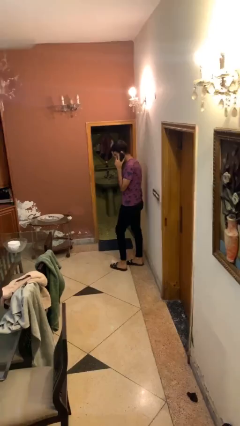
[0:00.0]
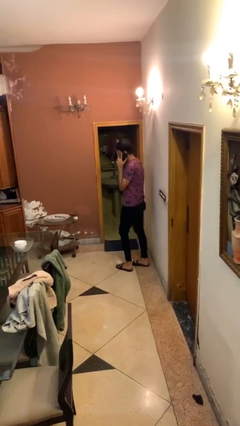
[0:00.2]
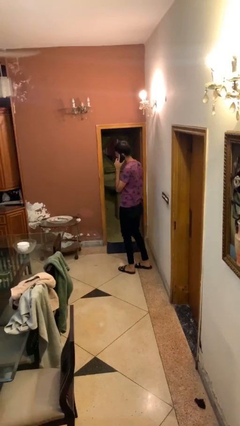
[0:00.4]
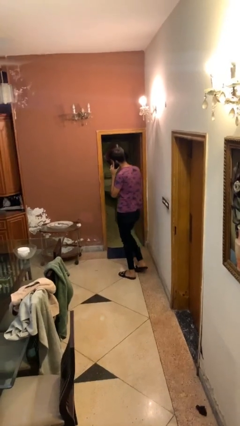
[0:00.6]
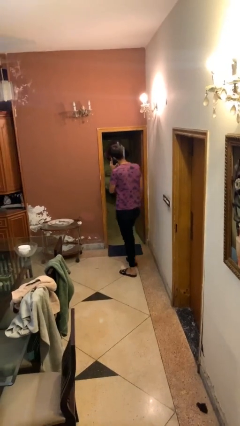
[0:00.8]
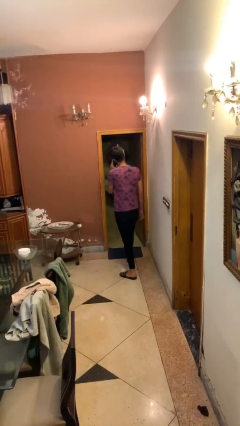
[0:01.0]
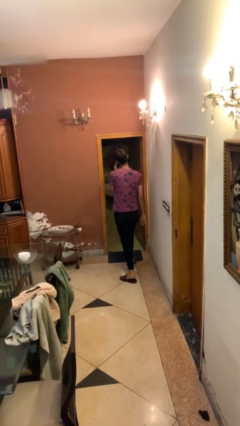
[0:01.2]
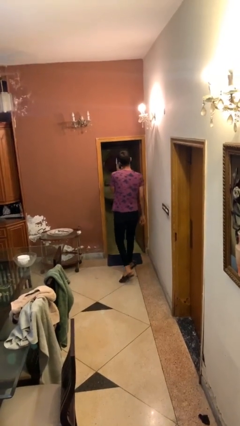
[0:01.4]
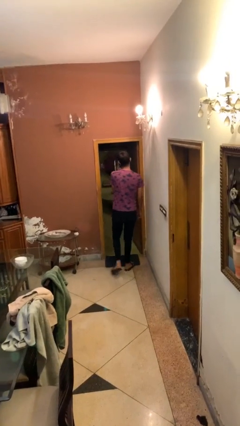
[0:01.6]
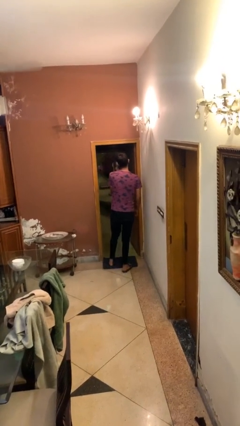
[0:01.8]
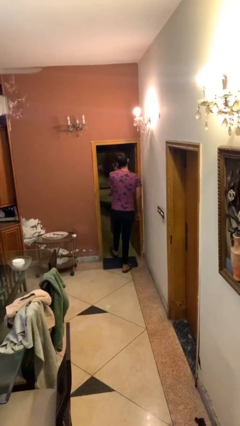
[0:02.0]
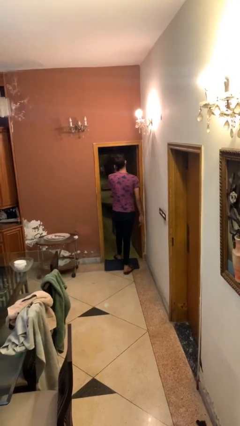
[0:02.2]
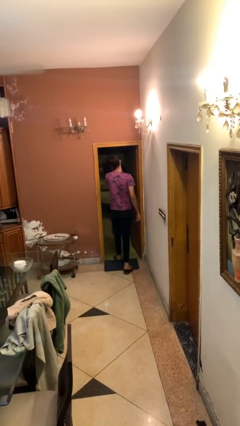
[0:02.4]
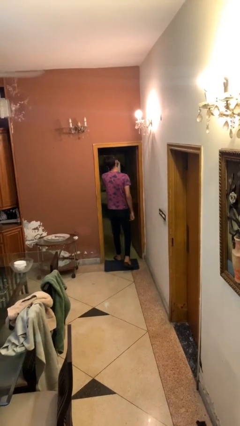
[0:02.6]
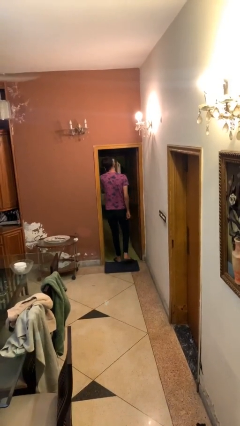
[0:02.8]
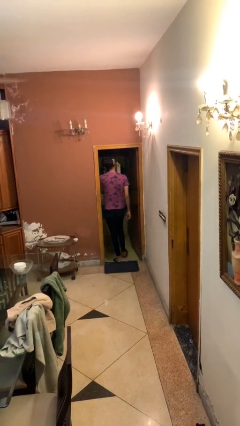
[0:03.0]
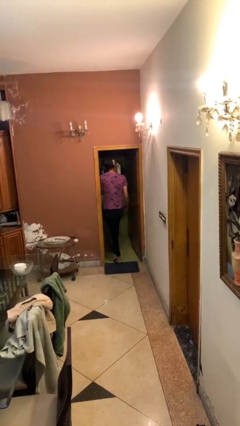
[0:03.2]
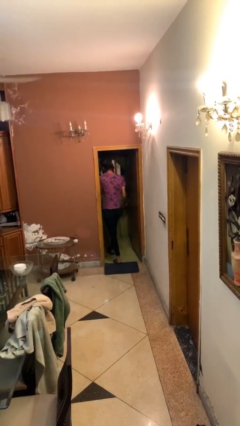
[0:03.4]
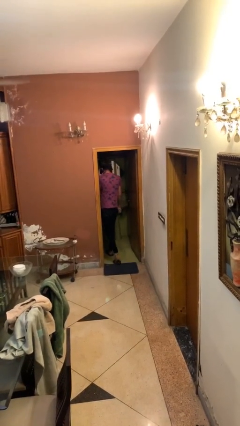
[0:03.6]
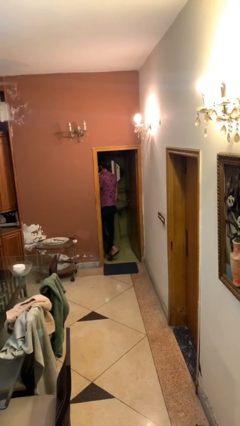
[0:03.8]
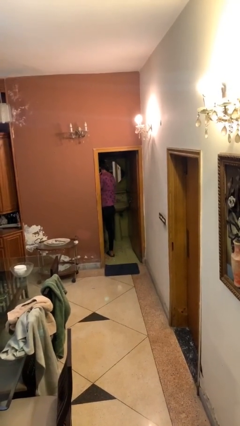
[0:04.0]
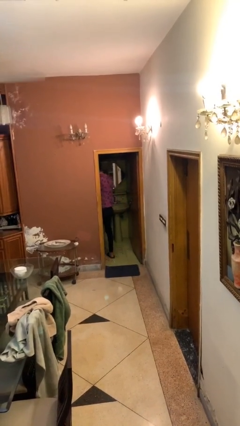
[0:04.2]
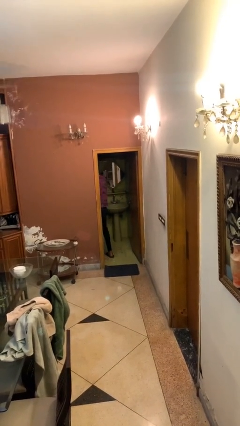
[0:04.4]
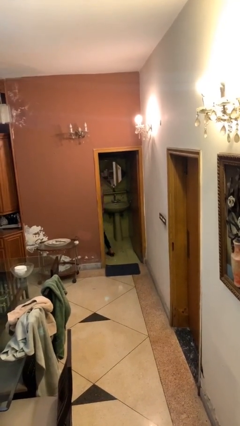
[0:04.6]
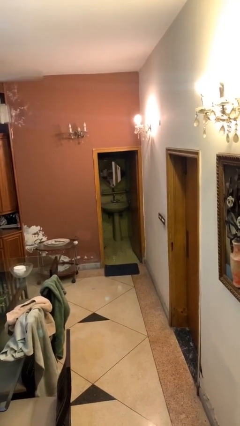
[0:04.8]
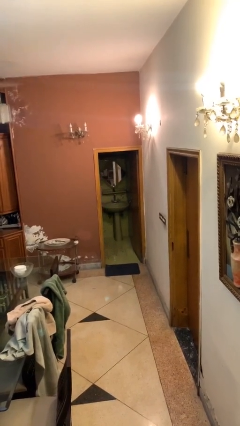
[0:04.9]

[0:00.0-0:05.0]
person exits scene through structure

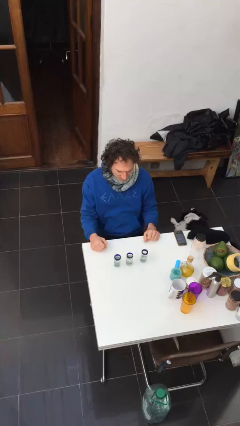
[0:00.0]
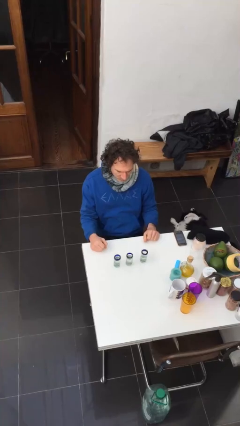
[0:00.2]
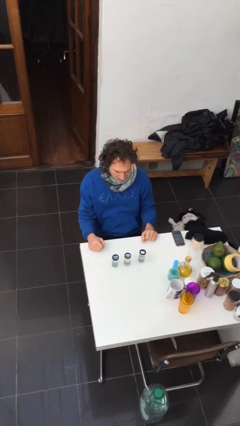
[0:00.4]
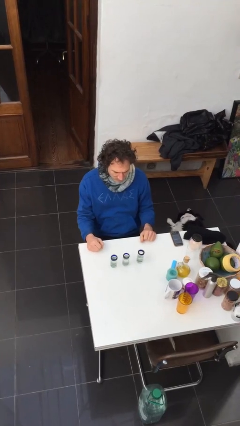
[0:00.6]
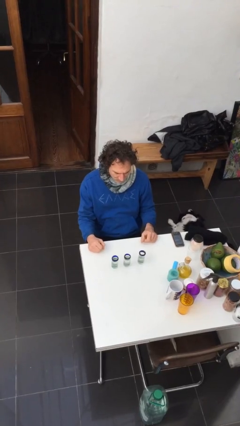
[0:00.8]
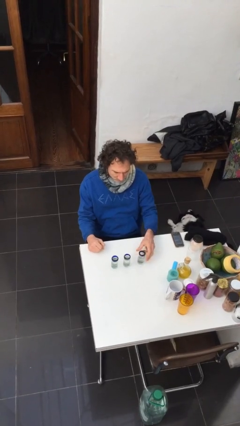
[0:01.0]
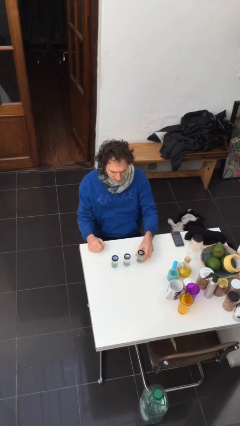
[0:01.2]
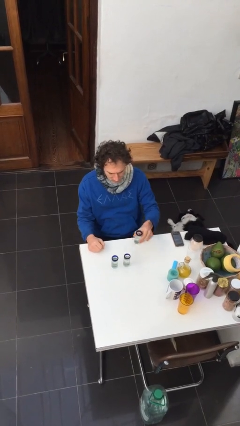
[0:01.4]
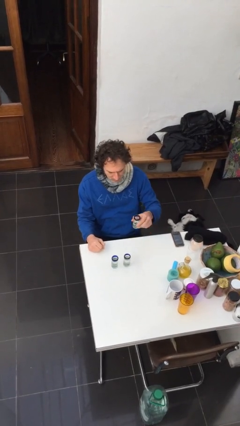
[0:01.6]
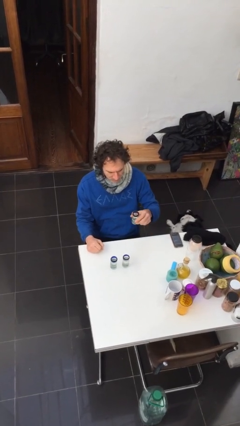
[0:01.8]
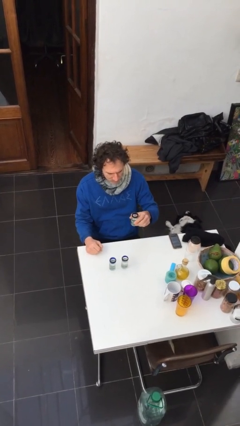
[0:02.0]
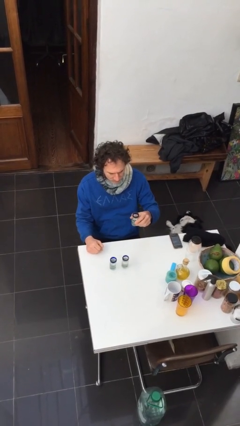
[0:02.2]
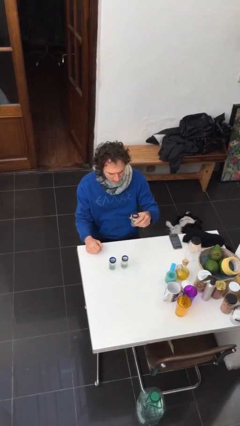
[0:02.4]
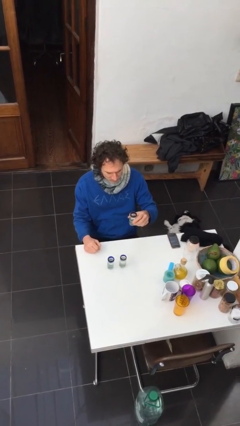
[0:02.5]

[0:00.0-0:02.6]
person picks up object from table

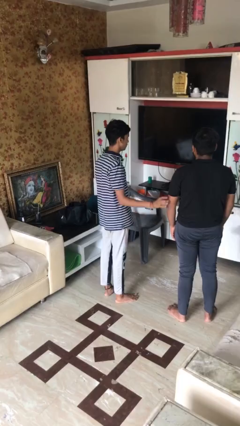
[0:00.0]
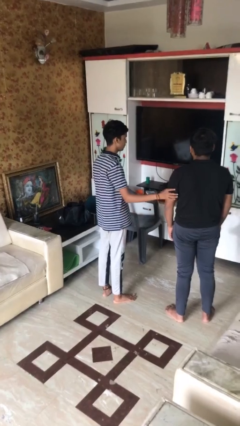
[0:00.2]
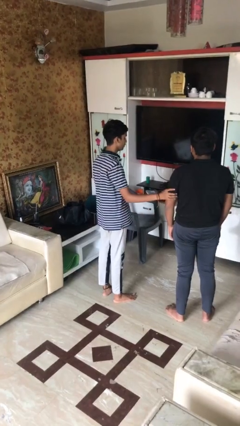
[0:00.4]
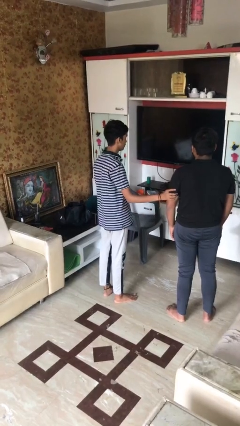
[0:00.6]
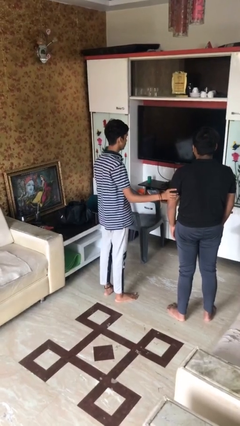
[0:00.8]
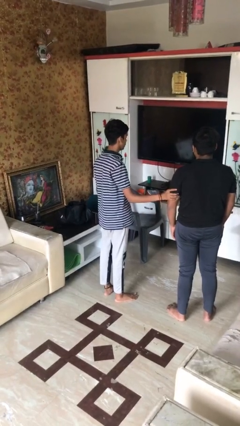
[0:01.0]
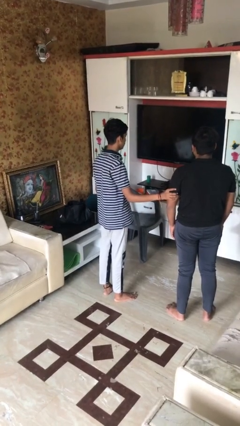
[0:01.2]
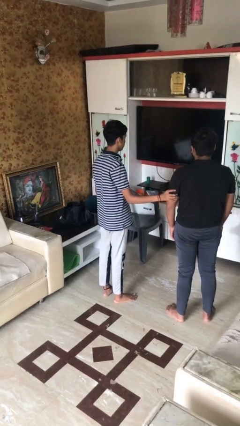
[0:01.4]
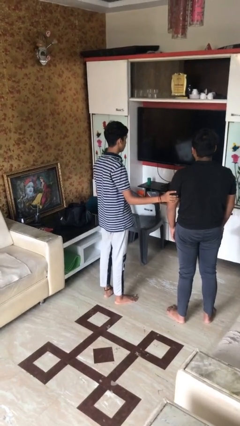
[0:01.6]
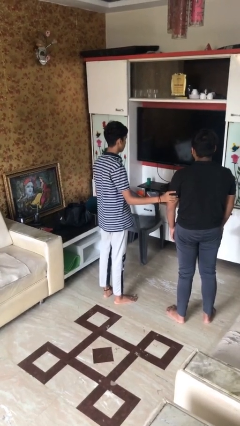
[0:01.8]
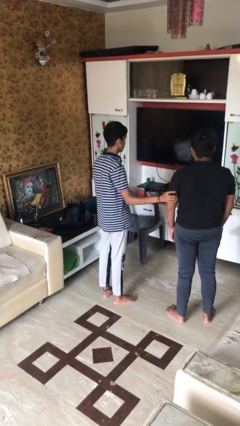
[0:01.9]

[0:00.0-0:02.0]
person grabs person by bicep

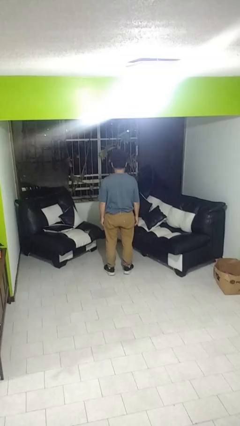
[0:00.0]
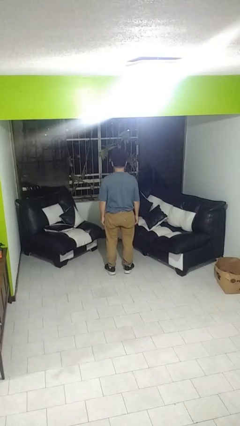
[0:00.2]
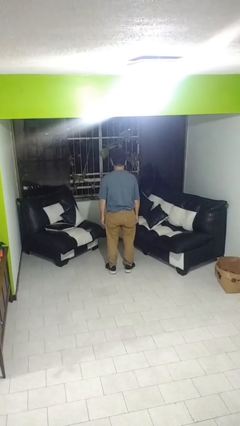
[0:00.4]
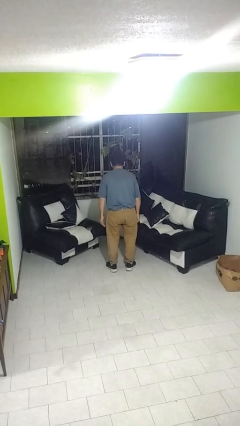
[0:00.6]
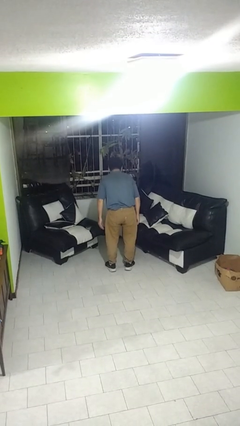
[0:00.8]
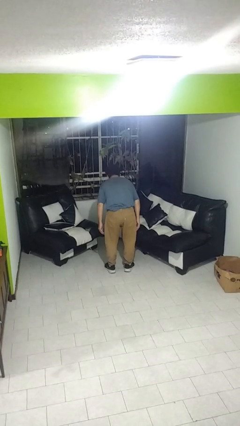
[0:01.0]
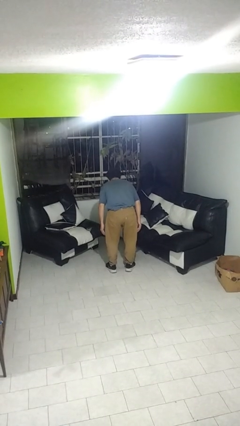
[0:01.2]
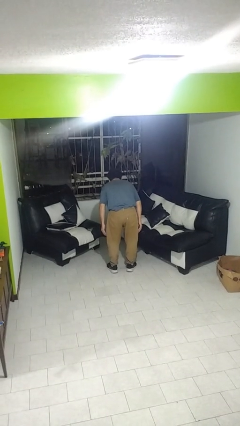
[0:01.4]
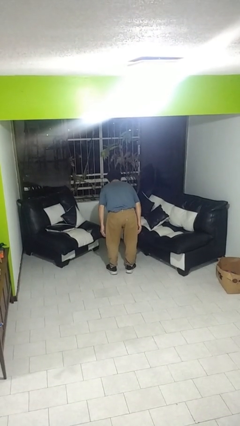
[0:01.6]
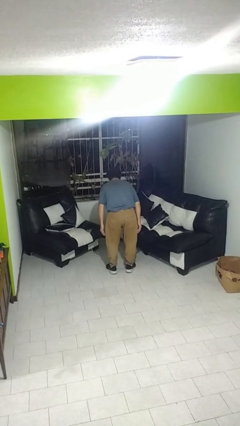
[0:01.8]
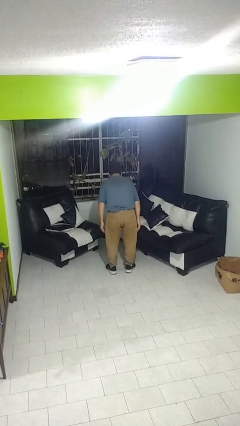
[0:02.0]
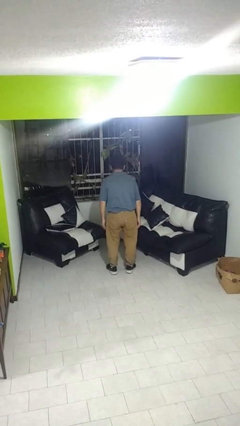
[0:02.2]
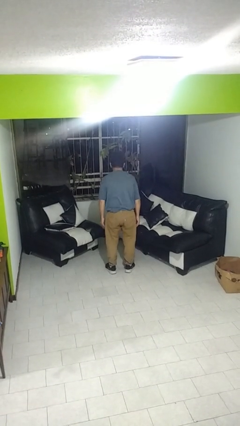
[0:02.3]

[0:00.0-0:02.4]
person bows

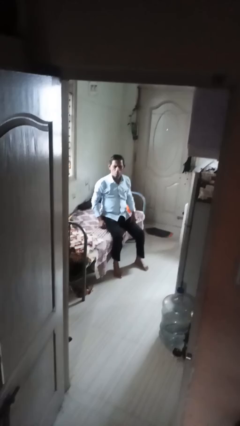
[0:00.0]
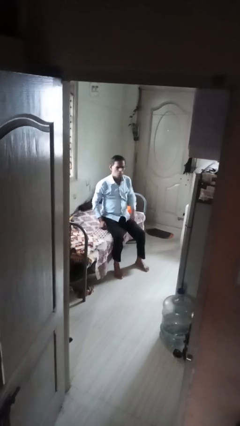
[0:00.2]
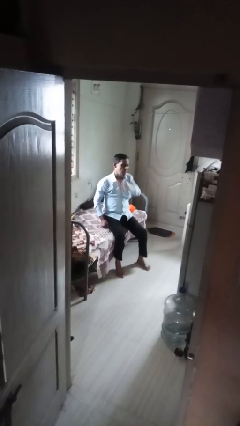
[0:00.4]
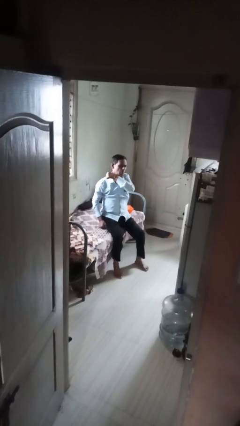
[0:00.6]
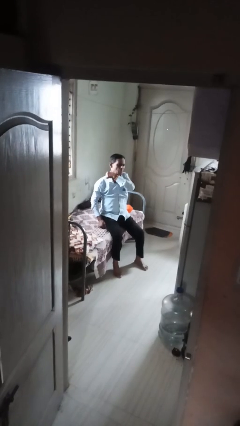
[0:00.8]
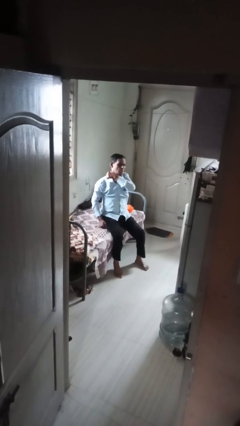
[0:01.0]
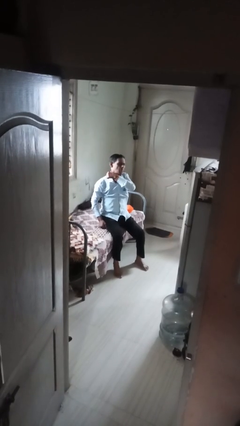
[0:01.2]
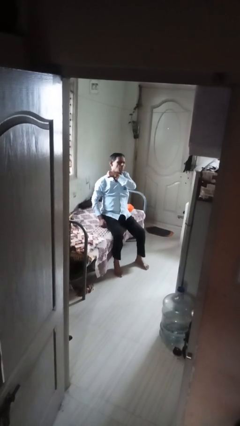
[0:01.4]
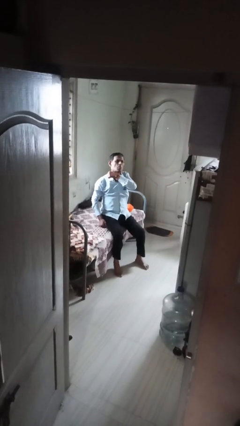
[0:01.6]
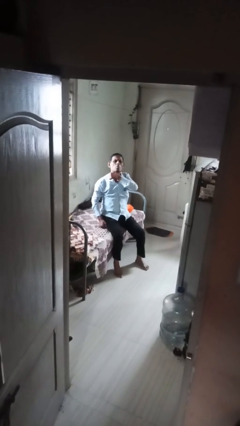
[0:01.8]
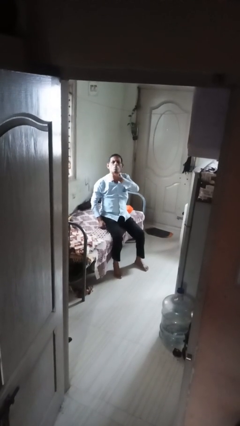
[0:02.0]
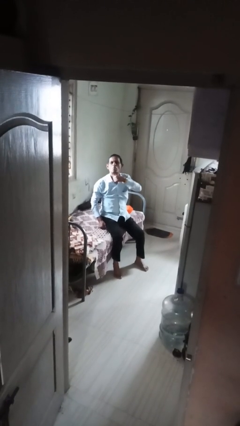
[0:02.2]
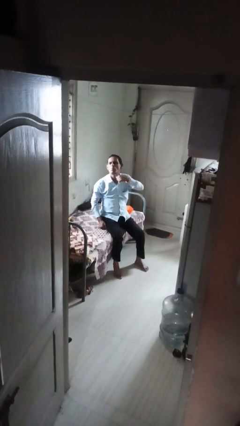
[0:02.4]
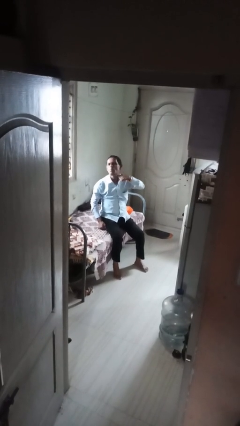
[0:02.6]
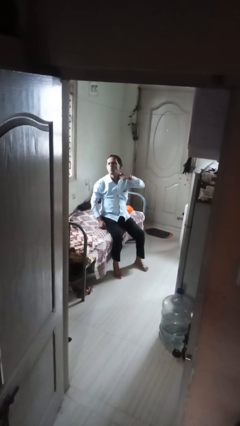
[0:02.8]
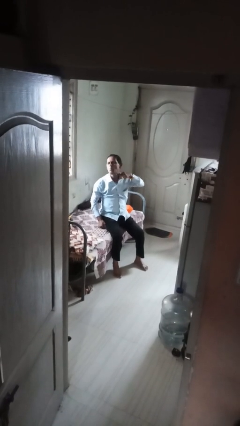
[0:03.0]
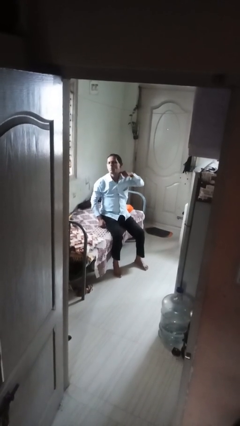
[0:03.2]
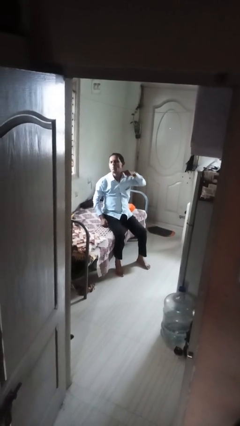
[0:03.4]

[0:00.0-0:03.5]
person gestures cut

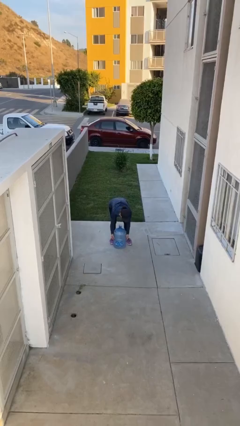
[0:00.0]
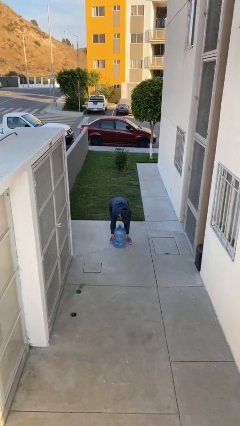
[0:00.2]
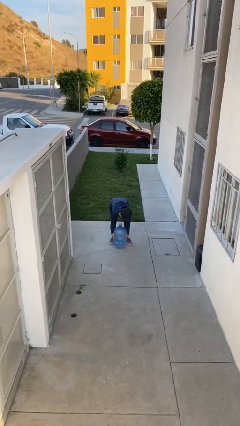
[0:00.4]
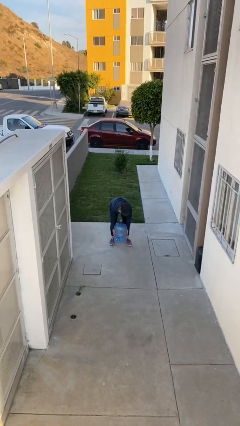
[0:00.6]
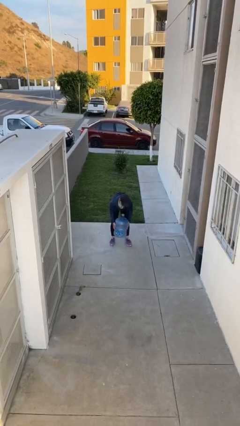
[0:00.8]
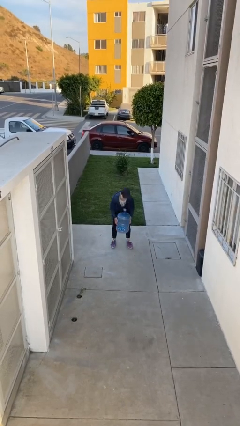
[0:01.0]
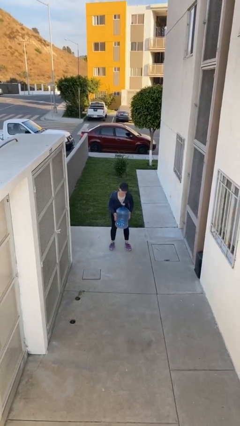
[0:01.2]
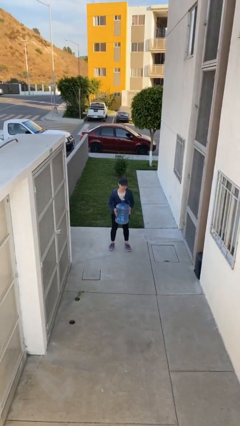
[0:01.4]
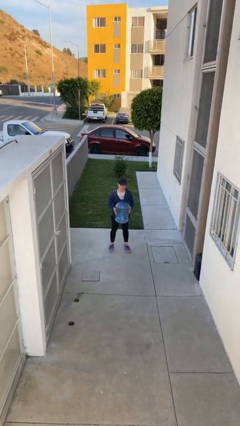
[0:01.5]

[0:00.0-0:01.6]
person picks up object from floor

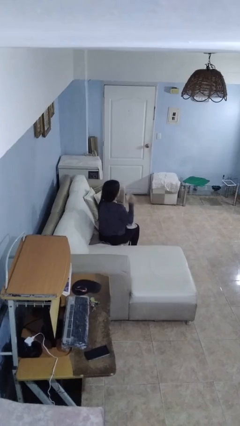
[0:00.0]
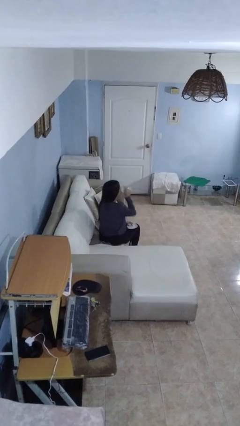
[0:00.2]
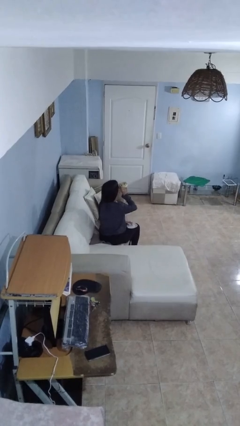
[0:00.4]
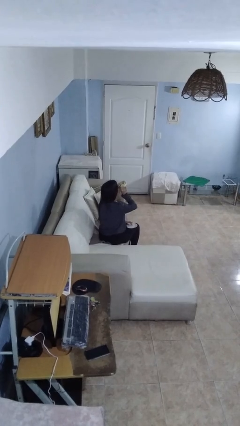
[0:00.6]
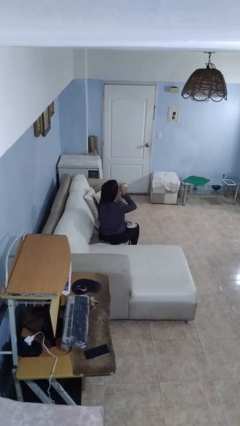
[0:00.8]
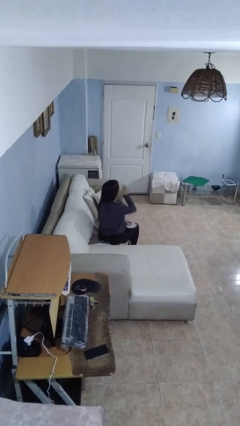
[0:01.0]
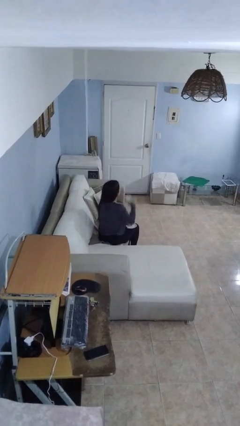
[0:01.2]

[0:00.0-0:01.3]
person drinks from mug
